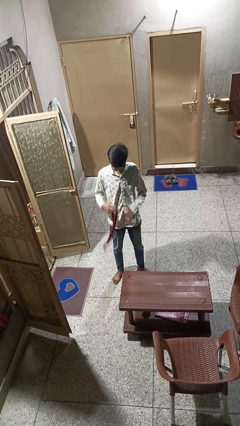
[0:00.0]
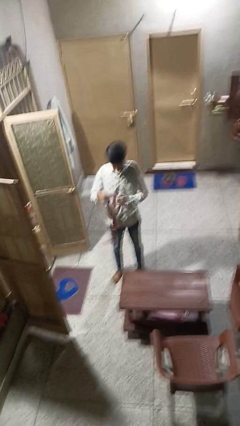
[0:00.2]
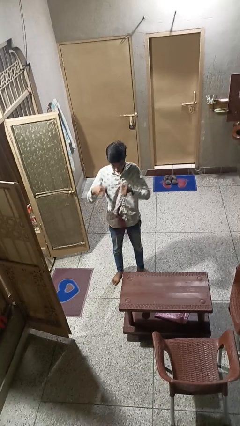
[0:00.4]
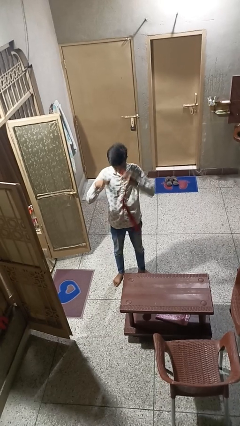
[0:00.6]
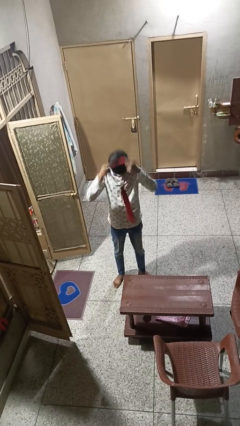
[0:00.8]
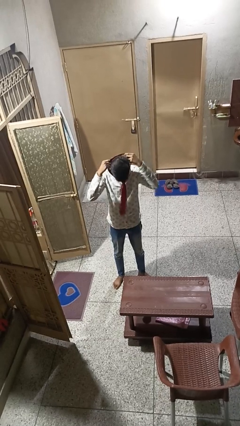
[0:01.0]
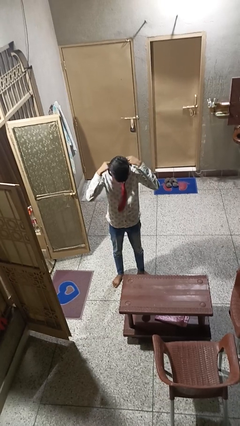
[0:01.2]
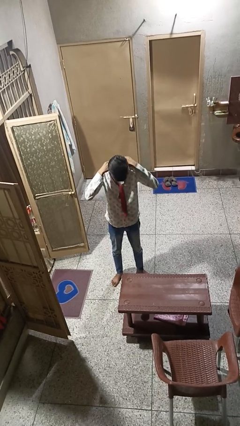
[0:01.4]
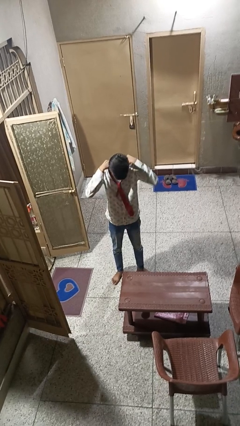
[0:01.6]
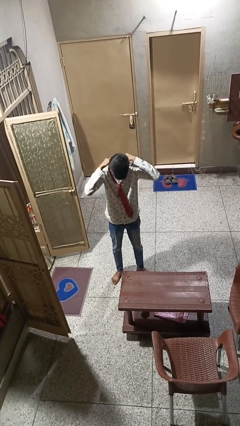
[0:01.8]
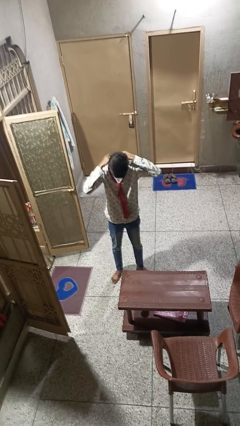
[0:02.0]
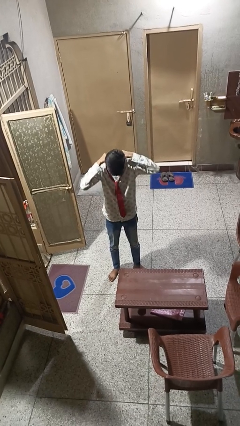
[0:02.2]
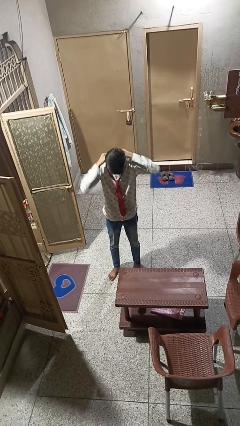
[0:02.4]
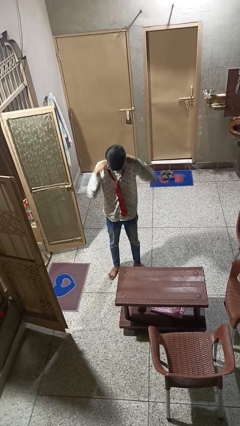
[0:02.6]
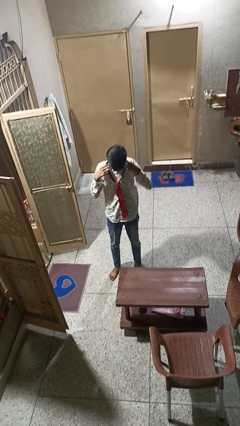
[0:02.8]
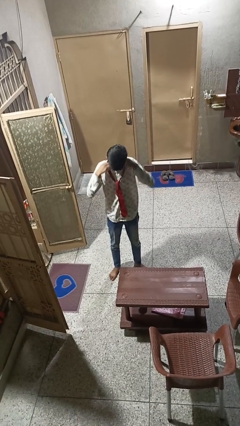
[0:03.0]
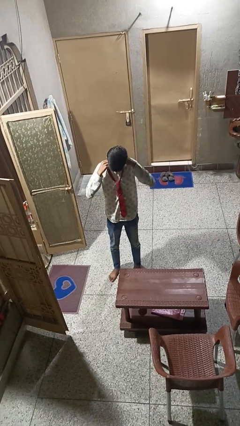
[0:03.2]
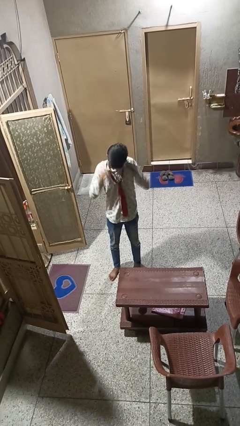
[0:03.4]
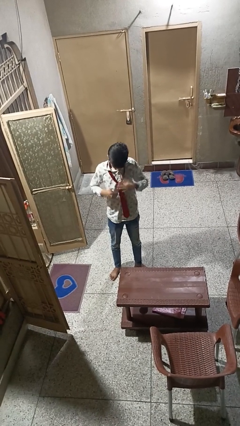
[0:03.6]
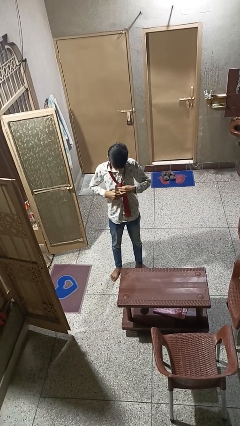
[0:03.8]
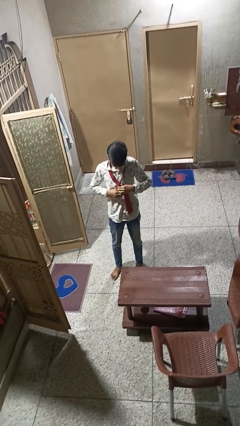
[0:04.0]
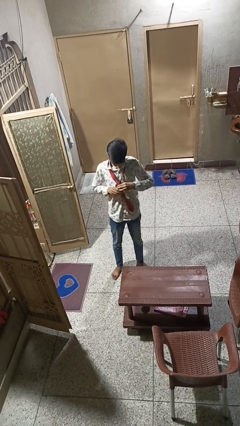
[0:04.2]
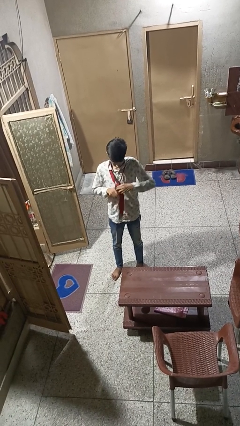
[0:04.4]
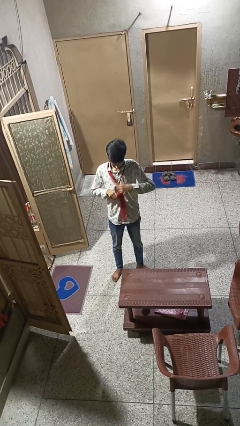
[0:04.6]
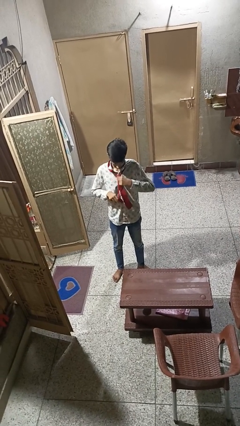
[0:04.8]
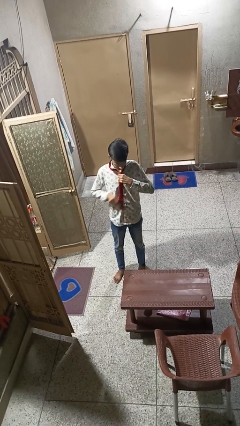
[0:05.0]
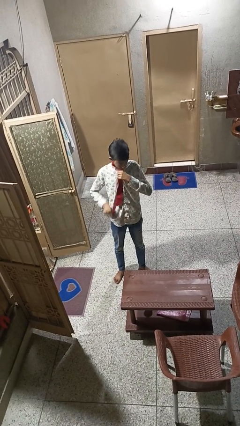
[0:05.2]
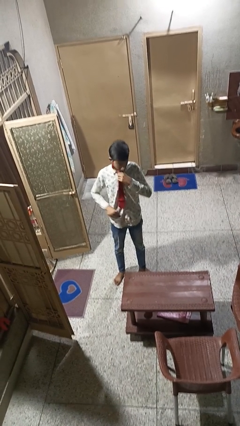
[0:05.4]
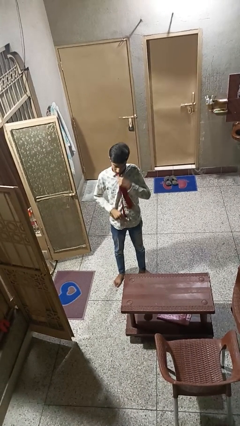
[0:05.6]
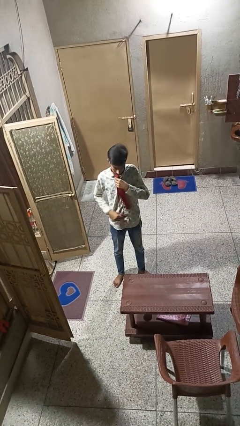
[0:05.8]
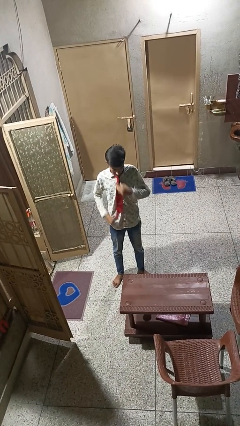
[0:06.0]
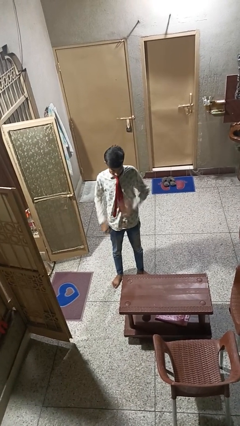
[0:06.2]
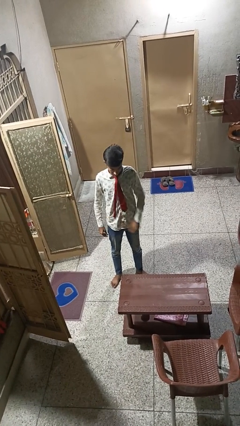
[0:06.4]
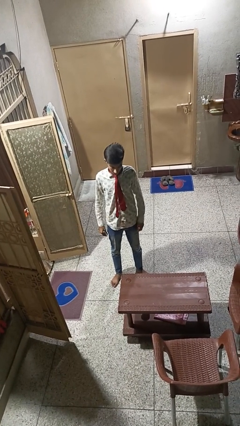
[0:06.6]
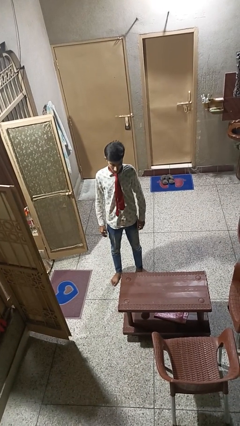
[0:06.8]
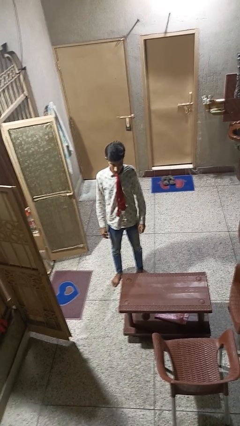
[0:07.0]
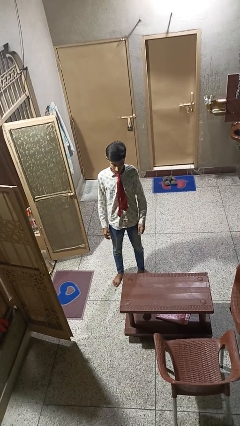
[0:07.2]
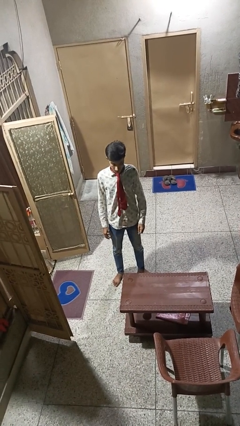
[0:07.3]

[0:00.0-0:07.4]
person puts on necktie

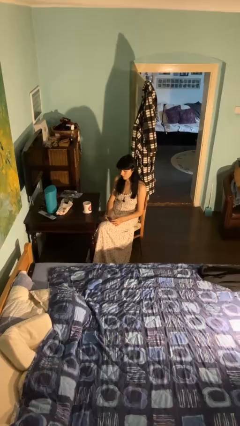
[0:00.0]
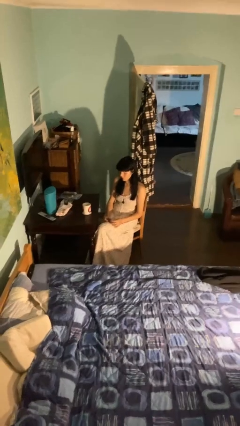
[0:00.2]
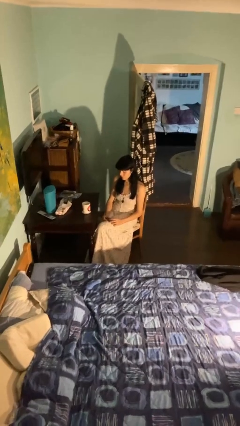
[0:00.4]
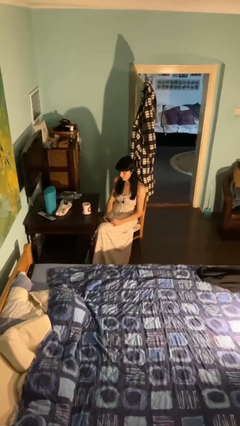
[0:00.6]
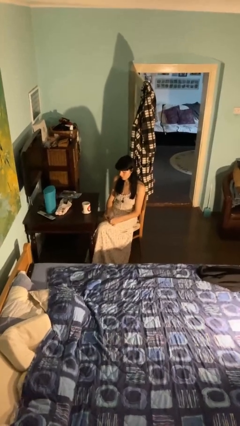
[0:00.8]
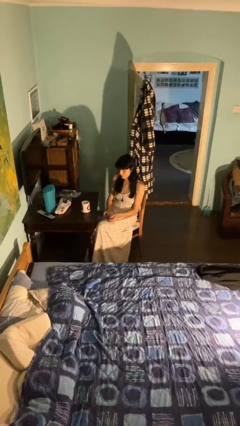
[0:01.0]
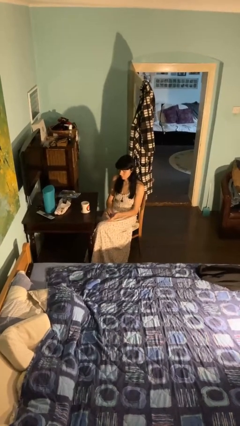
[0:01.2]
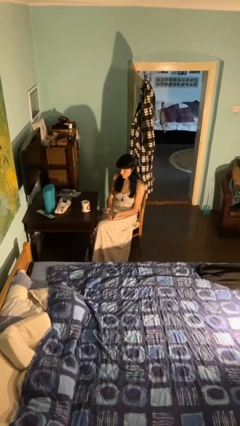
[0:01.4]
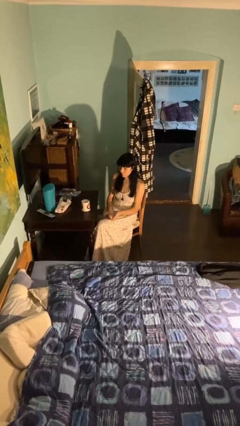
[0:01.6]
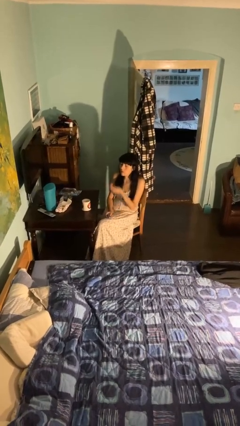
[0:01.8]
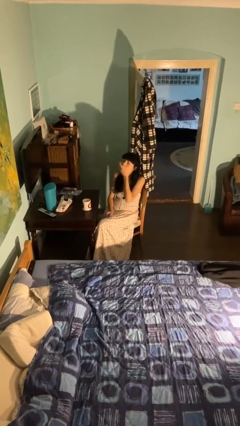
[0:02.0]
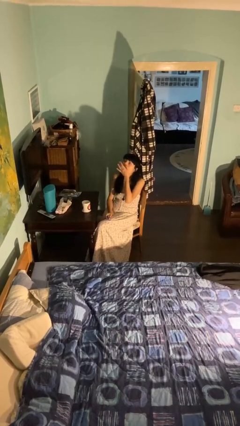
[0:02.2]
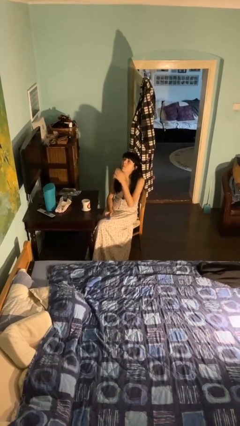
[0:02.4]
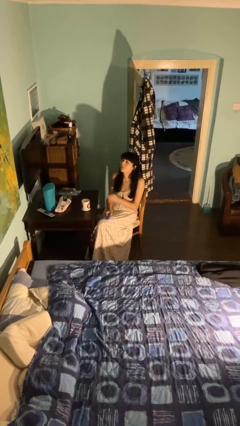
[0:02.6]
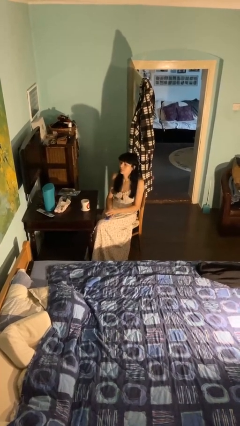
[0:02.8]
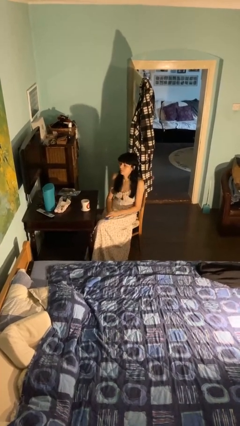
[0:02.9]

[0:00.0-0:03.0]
person takes medicine pills

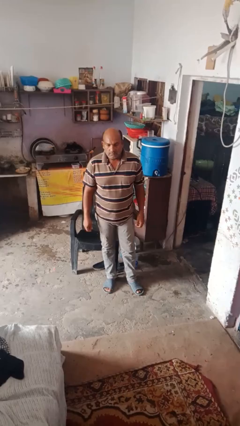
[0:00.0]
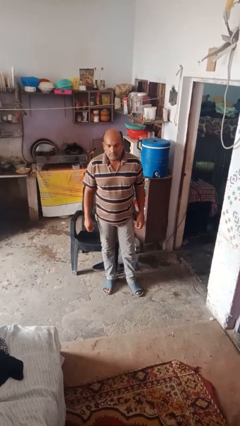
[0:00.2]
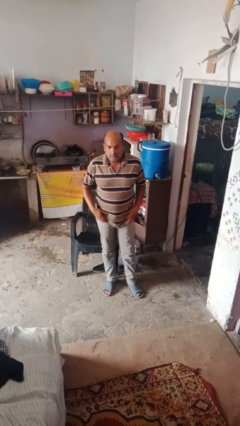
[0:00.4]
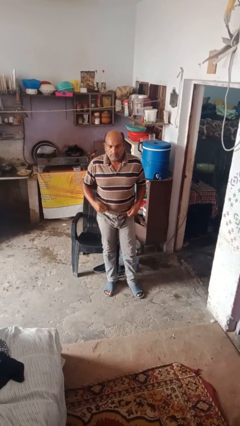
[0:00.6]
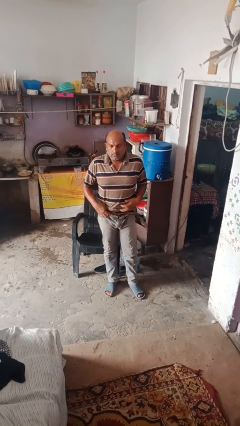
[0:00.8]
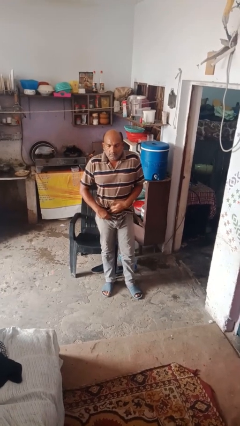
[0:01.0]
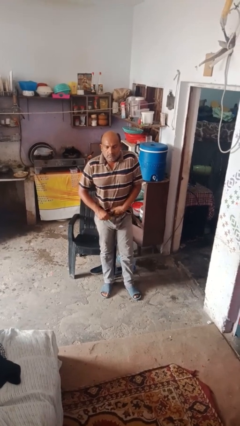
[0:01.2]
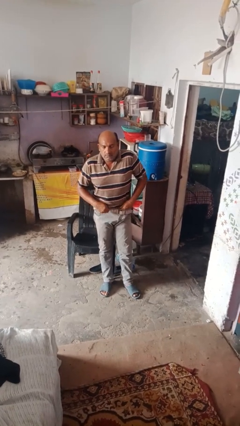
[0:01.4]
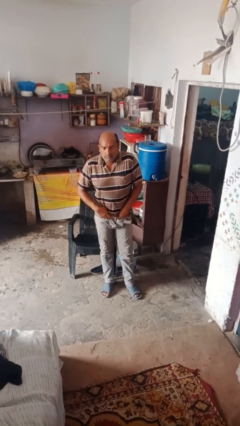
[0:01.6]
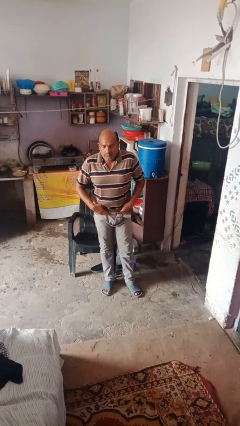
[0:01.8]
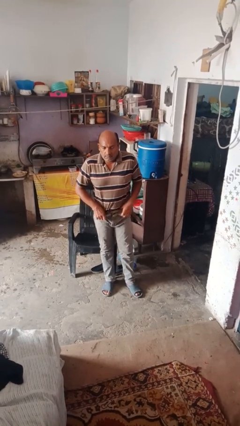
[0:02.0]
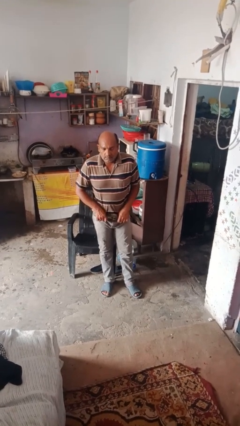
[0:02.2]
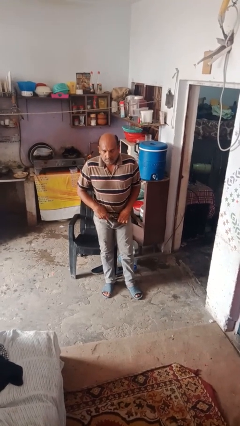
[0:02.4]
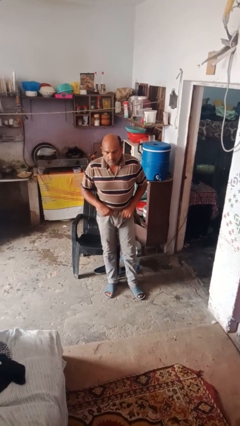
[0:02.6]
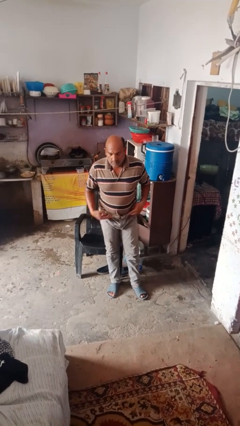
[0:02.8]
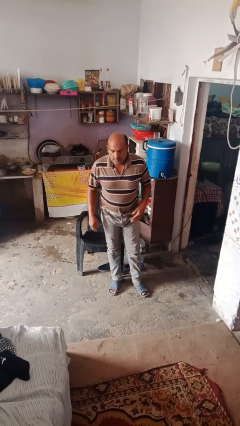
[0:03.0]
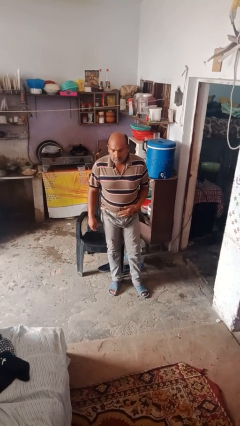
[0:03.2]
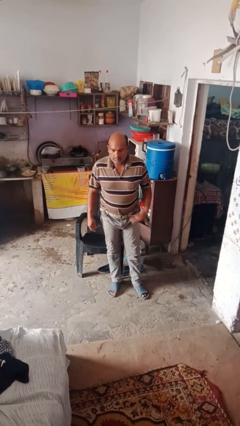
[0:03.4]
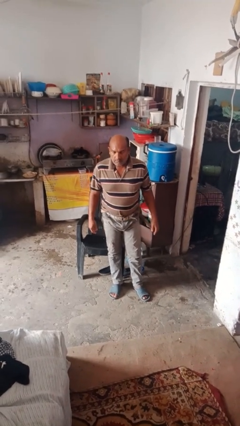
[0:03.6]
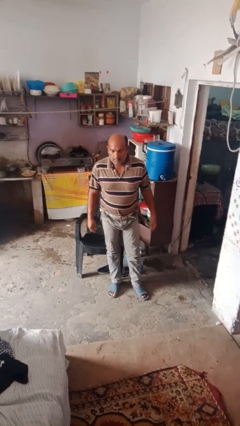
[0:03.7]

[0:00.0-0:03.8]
person tucks in shirt

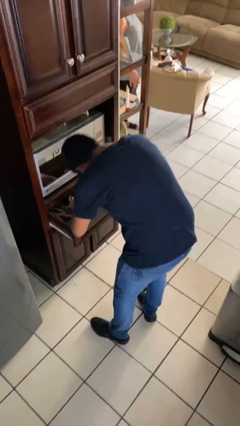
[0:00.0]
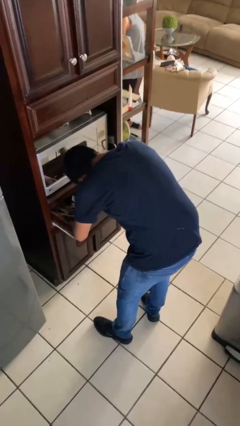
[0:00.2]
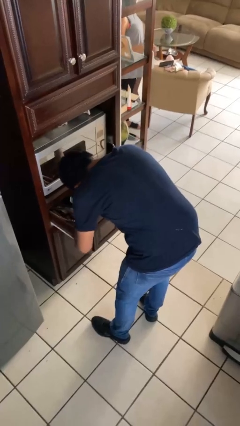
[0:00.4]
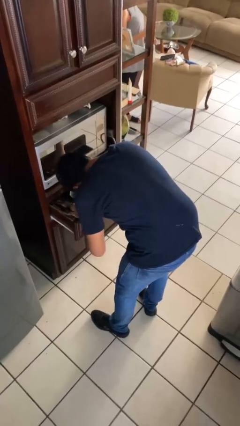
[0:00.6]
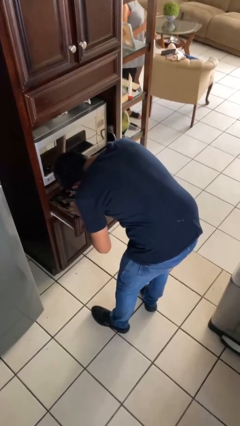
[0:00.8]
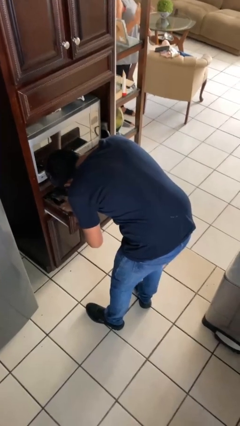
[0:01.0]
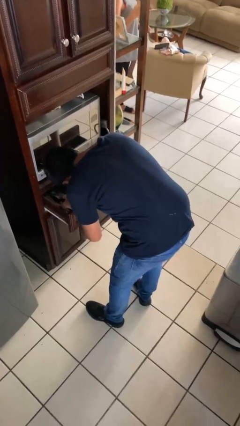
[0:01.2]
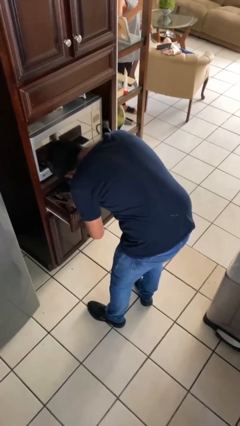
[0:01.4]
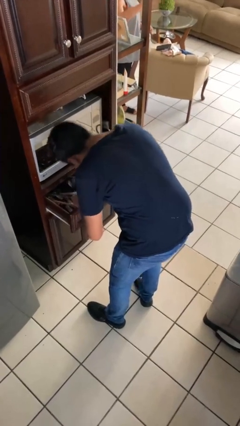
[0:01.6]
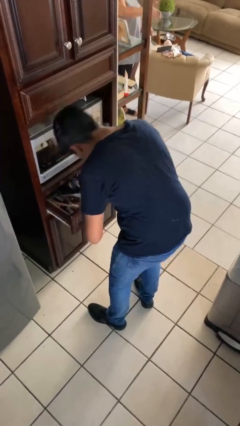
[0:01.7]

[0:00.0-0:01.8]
person searches in kitchen drawer

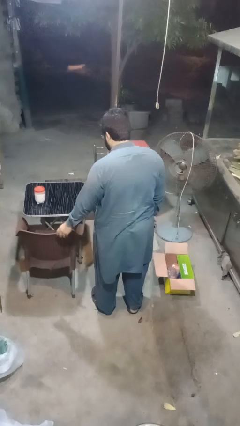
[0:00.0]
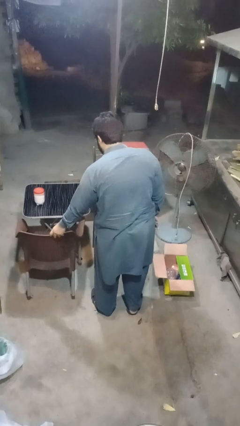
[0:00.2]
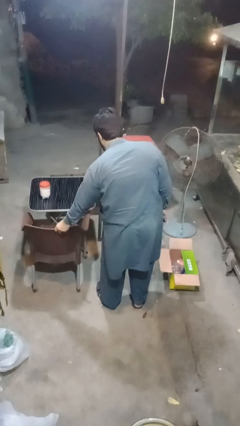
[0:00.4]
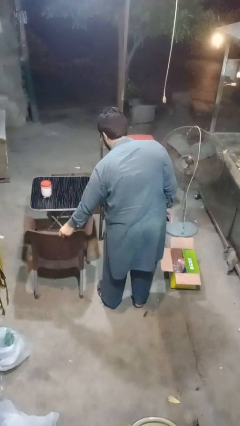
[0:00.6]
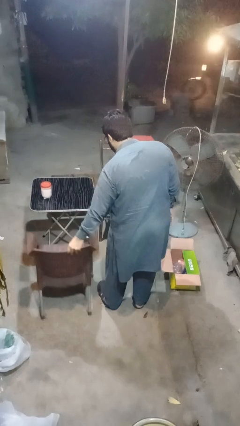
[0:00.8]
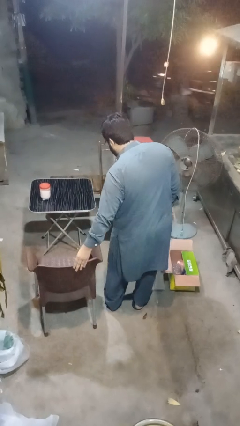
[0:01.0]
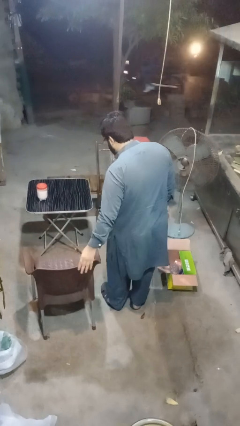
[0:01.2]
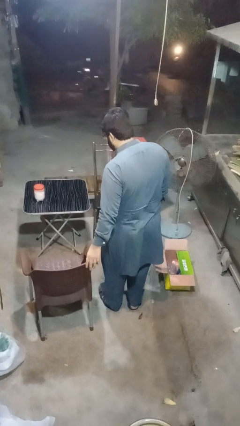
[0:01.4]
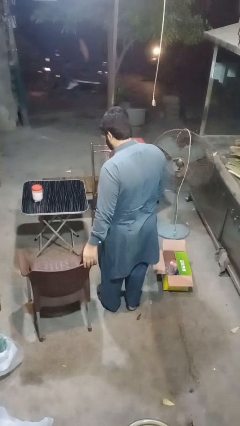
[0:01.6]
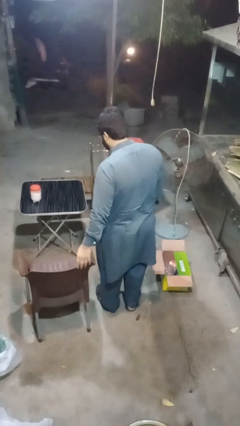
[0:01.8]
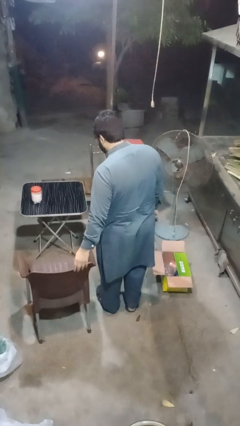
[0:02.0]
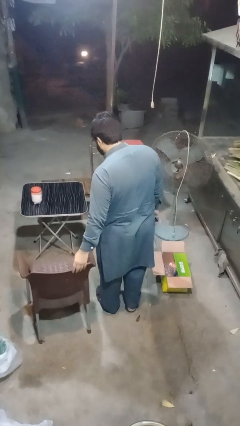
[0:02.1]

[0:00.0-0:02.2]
person pulls out chair
